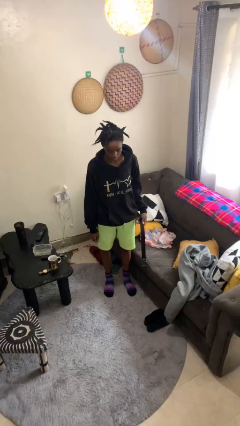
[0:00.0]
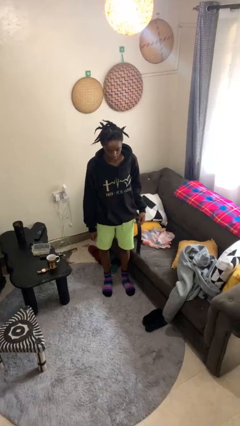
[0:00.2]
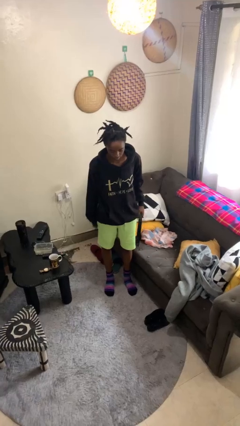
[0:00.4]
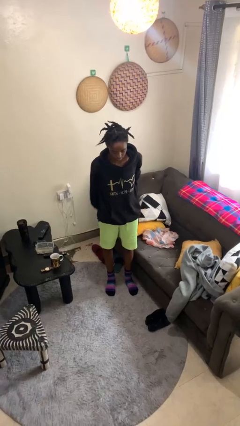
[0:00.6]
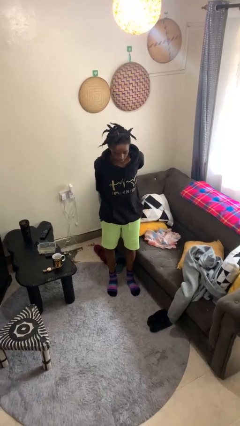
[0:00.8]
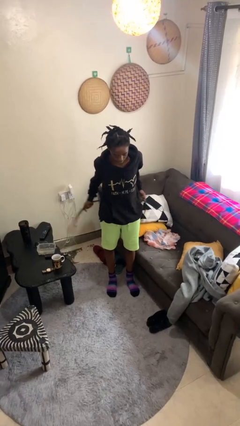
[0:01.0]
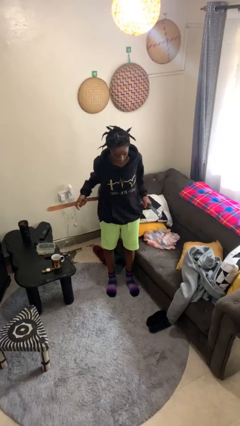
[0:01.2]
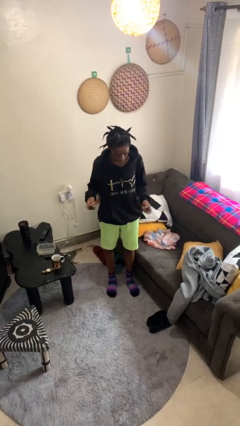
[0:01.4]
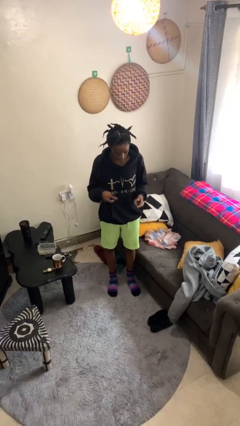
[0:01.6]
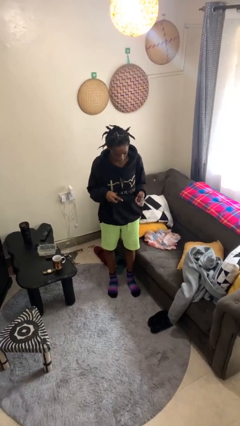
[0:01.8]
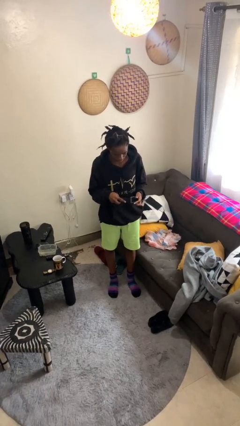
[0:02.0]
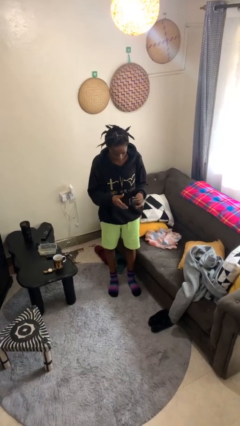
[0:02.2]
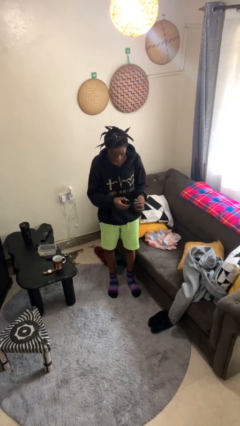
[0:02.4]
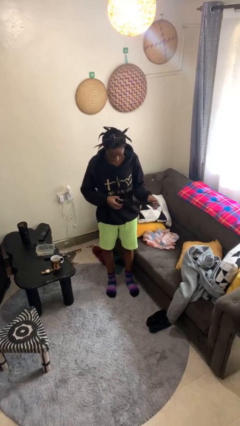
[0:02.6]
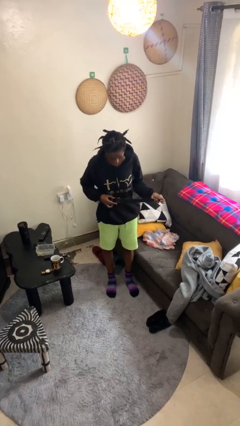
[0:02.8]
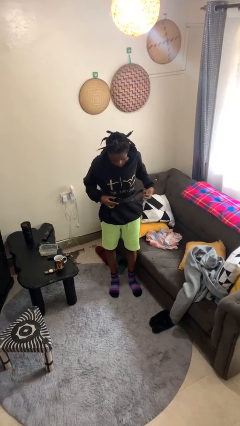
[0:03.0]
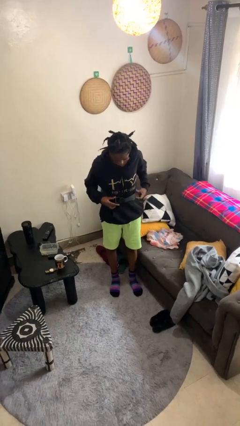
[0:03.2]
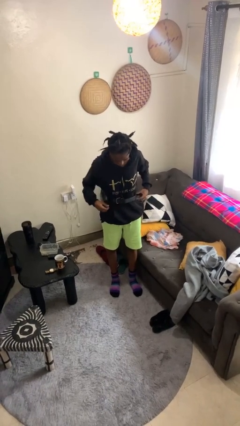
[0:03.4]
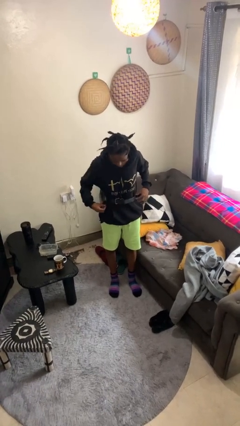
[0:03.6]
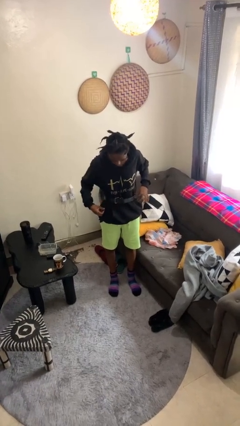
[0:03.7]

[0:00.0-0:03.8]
person puts on belt

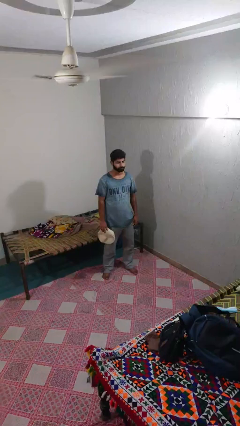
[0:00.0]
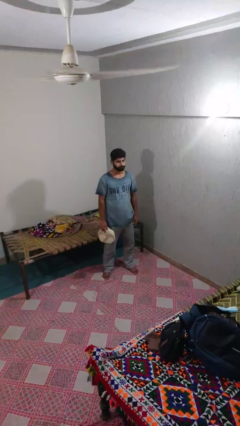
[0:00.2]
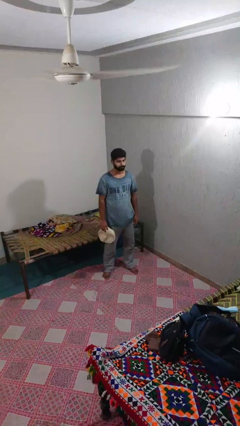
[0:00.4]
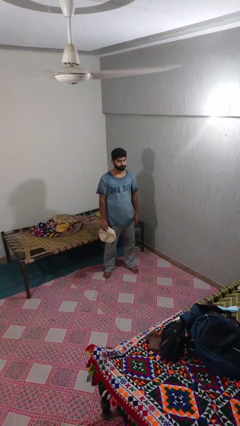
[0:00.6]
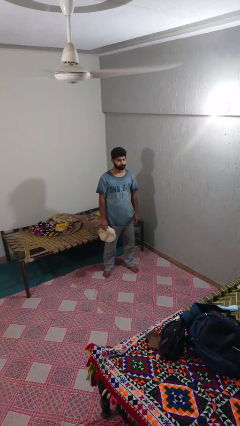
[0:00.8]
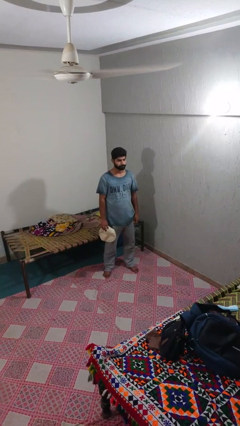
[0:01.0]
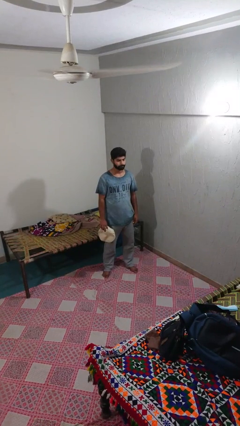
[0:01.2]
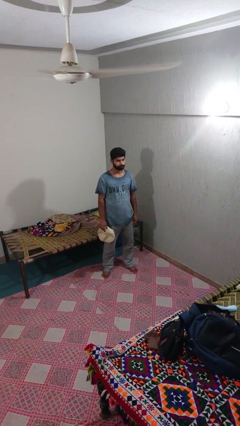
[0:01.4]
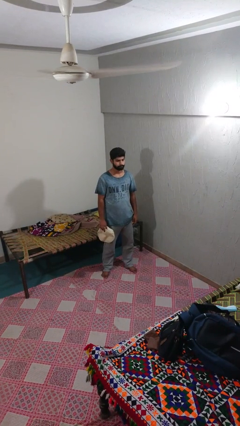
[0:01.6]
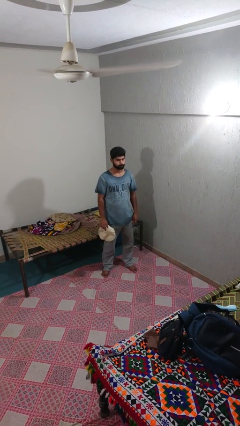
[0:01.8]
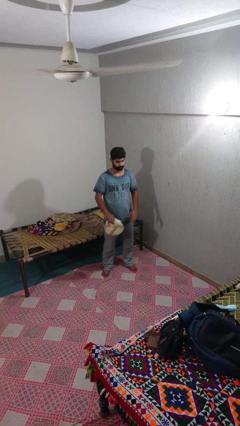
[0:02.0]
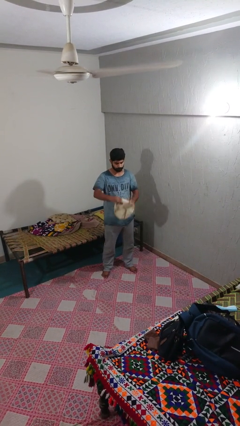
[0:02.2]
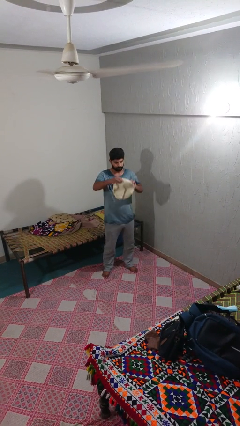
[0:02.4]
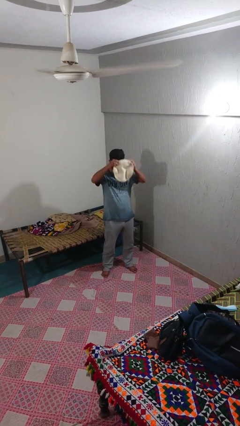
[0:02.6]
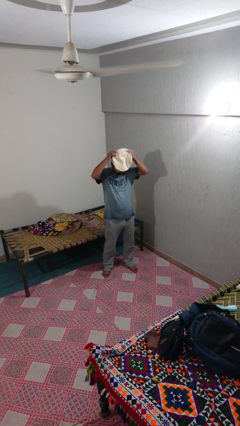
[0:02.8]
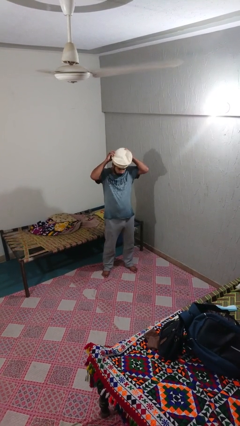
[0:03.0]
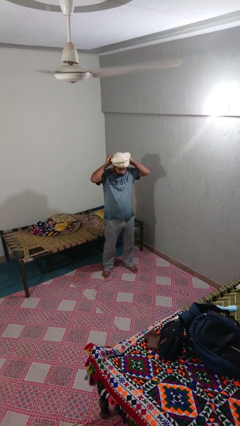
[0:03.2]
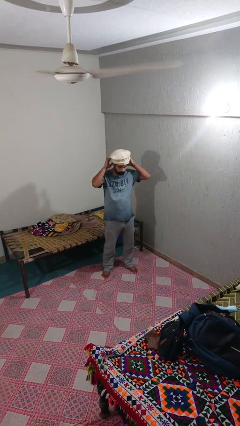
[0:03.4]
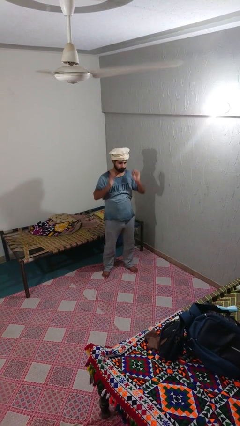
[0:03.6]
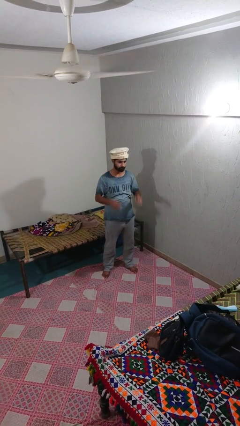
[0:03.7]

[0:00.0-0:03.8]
person puts on hat

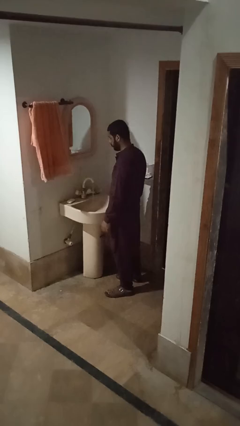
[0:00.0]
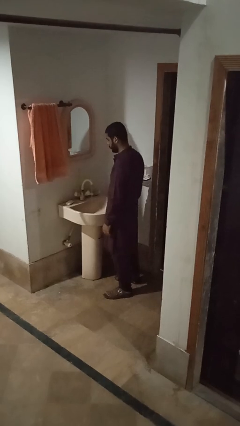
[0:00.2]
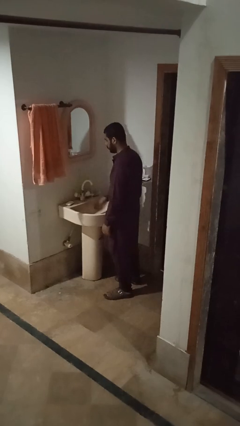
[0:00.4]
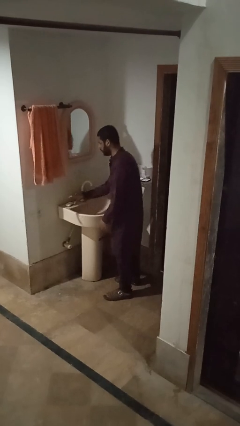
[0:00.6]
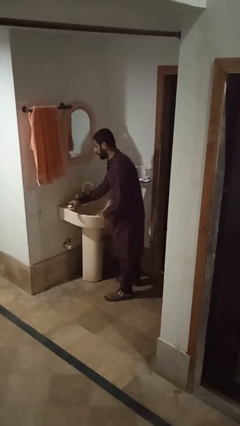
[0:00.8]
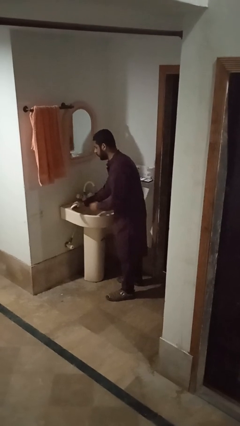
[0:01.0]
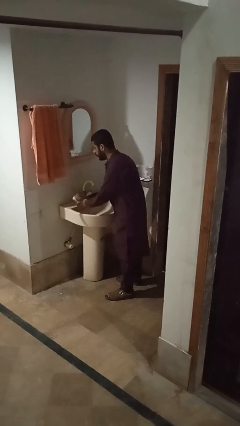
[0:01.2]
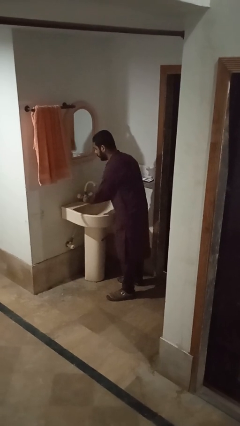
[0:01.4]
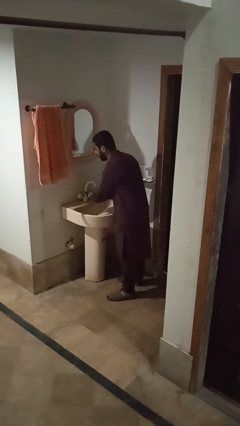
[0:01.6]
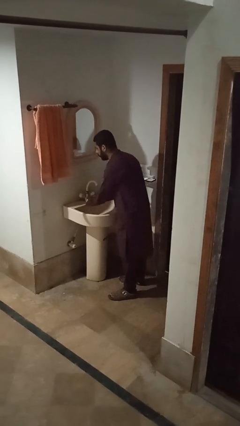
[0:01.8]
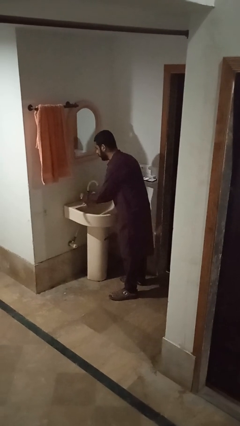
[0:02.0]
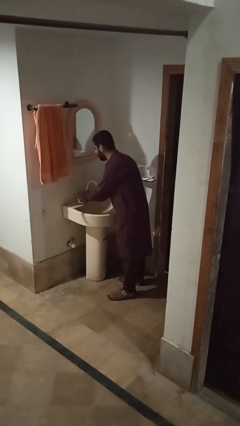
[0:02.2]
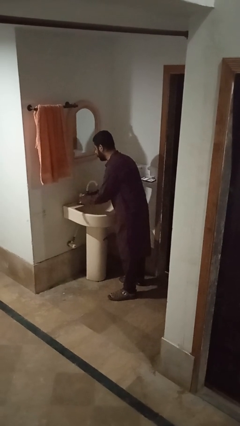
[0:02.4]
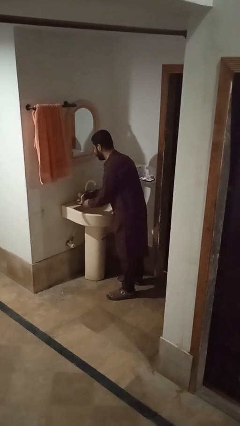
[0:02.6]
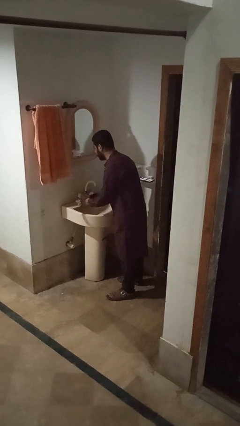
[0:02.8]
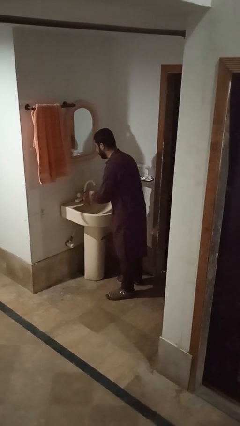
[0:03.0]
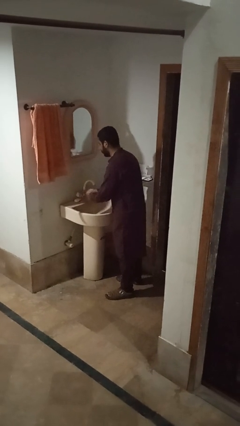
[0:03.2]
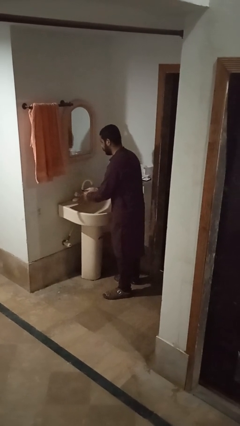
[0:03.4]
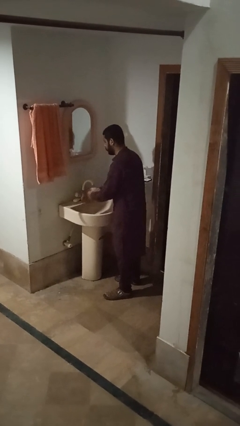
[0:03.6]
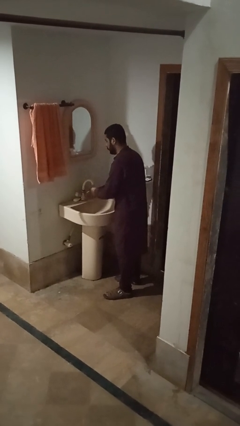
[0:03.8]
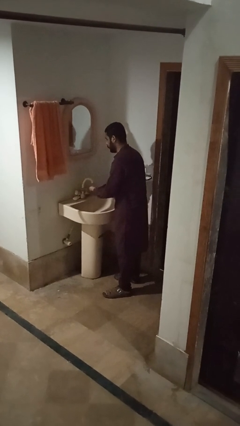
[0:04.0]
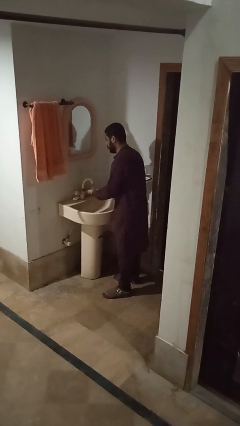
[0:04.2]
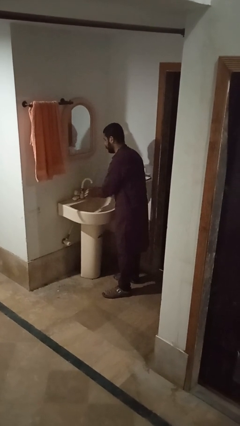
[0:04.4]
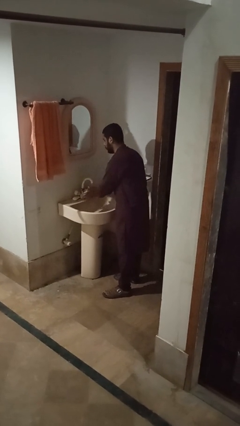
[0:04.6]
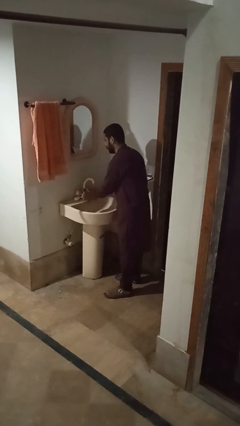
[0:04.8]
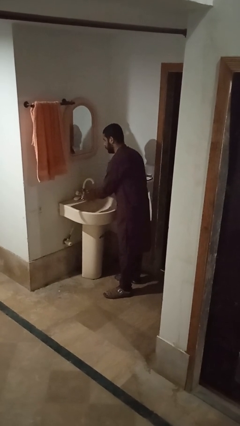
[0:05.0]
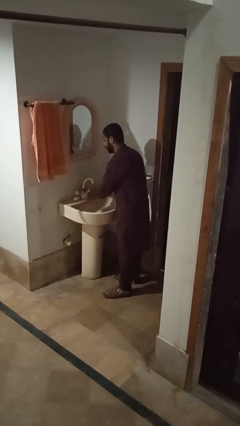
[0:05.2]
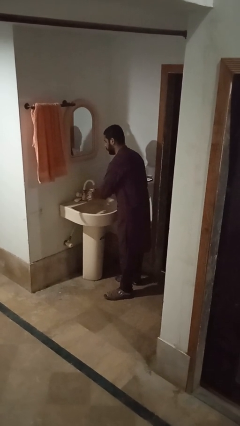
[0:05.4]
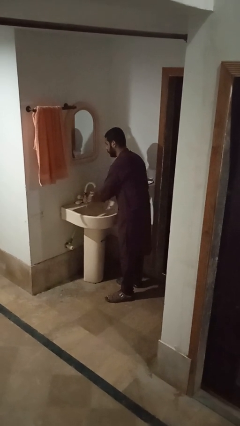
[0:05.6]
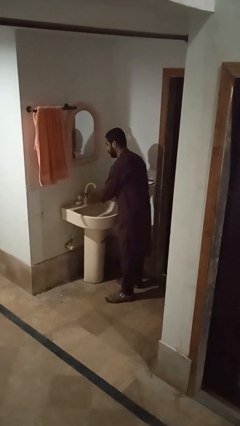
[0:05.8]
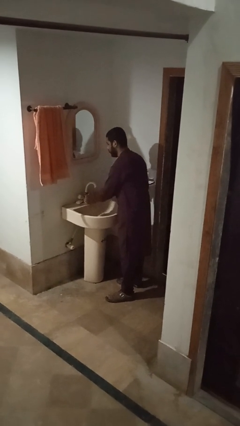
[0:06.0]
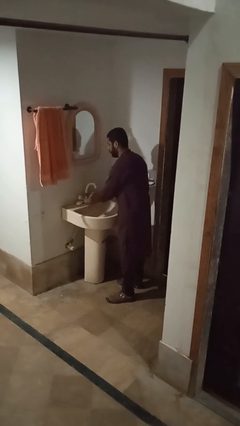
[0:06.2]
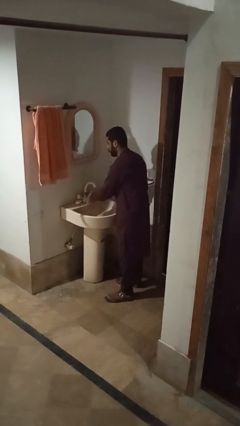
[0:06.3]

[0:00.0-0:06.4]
person washes hands

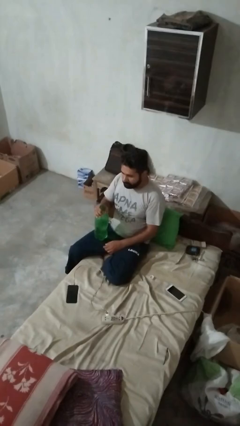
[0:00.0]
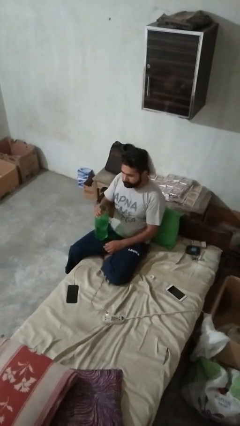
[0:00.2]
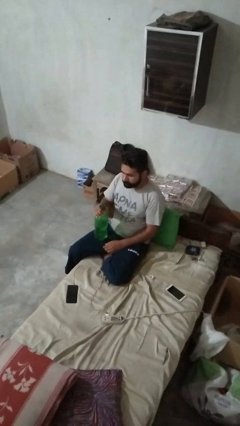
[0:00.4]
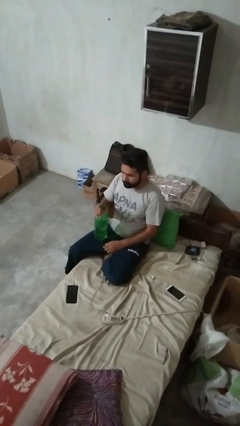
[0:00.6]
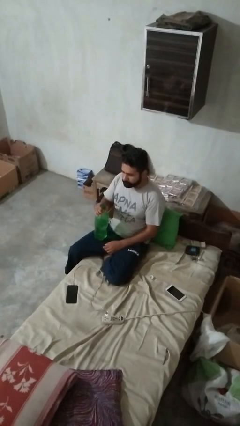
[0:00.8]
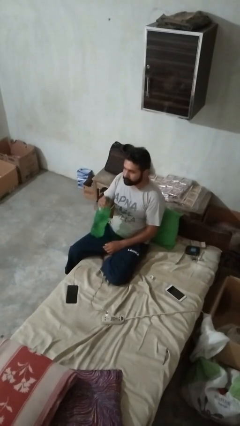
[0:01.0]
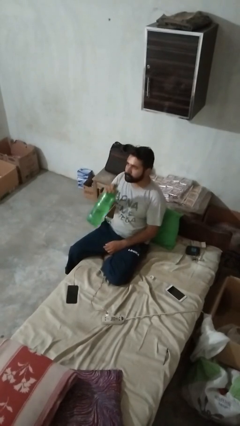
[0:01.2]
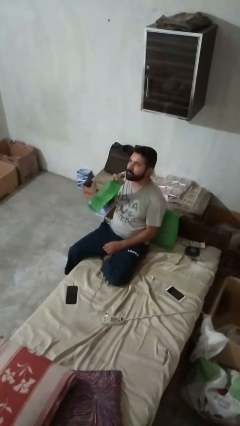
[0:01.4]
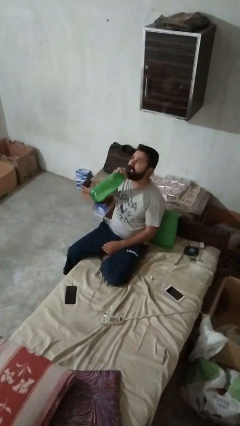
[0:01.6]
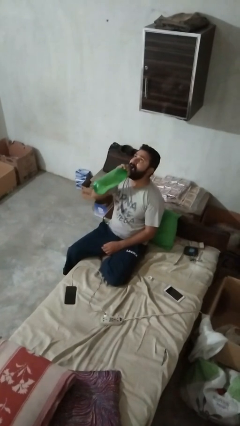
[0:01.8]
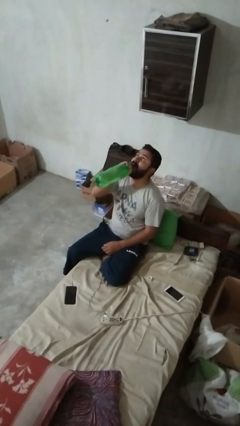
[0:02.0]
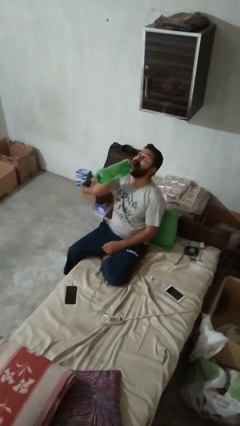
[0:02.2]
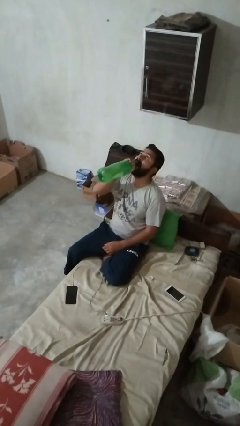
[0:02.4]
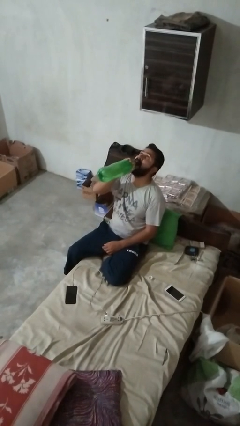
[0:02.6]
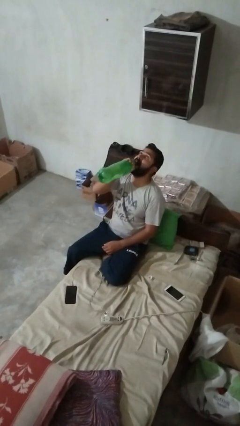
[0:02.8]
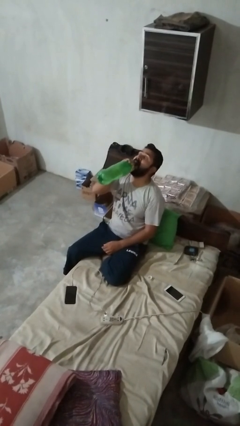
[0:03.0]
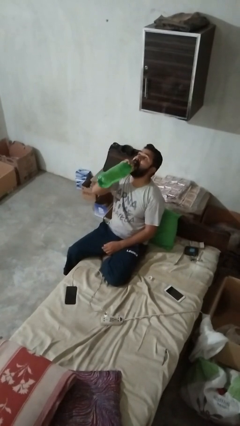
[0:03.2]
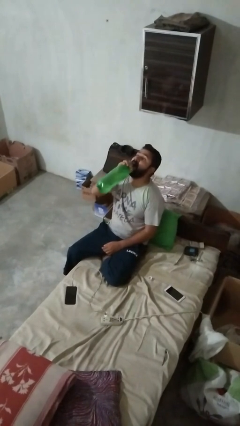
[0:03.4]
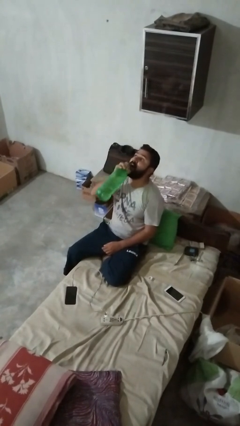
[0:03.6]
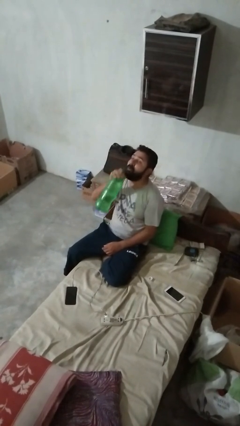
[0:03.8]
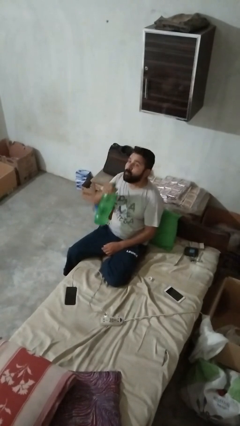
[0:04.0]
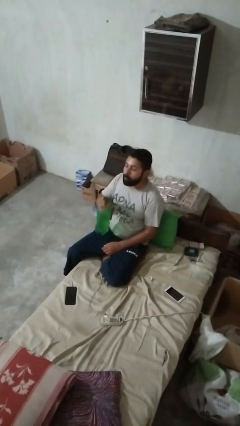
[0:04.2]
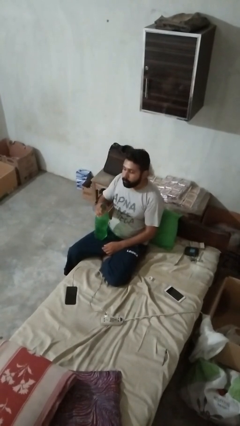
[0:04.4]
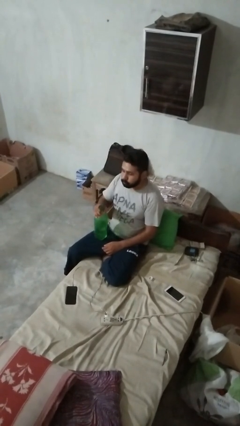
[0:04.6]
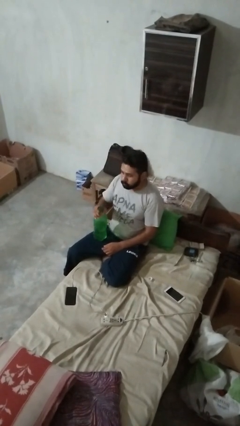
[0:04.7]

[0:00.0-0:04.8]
person drinks from bottle
